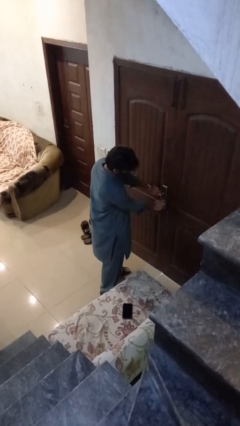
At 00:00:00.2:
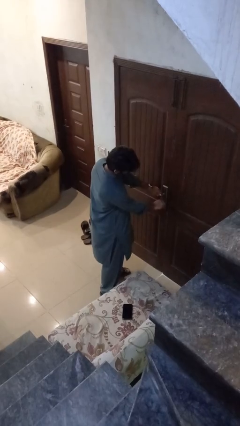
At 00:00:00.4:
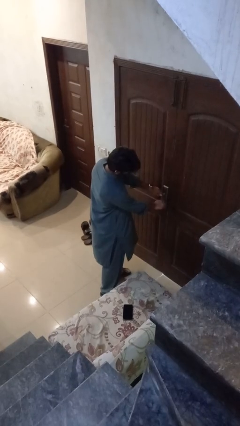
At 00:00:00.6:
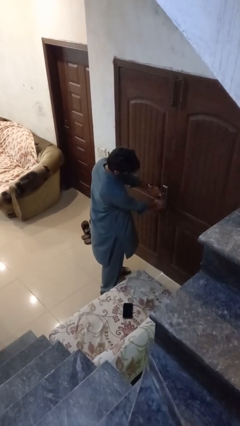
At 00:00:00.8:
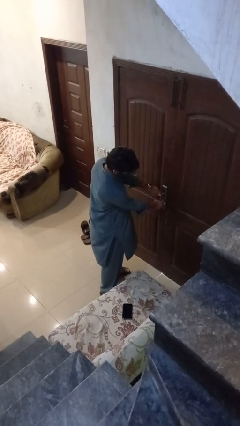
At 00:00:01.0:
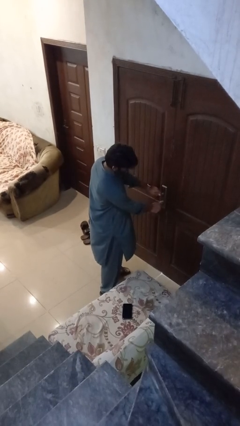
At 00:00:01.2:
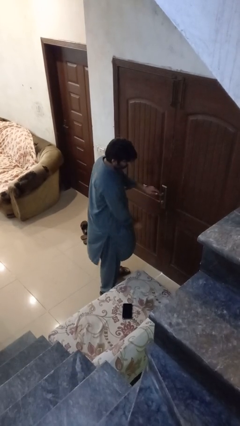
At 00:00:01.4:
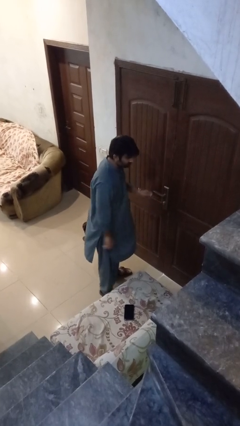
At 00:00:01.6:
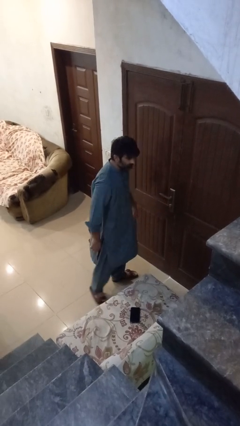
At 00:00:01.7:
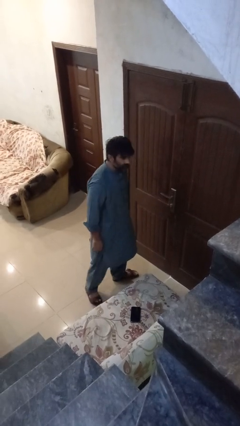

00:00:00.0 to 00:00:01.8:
person locks door with keys

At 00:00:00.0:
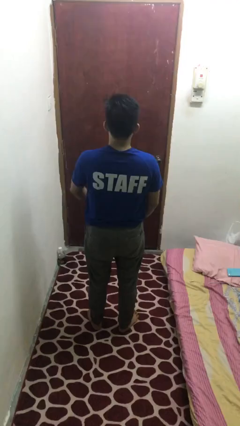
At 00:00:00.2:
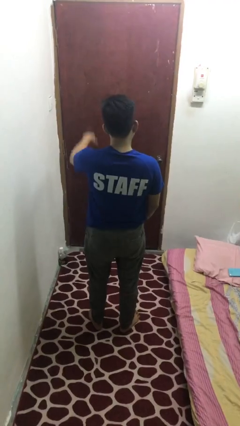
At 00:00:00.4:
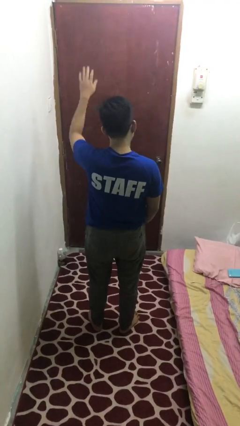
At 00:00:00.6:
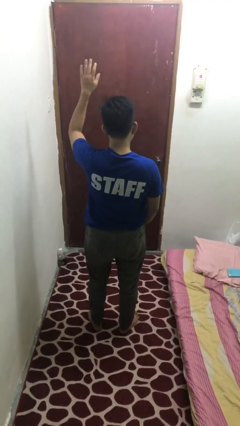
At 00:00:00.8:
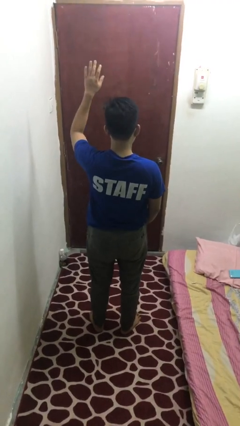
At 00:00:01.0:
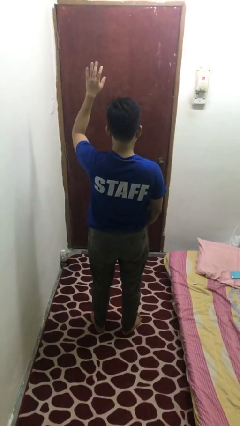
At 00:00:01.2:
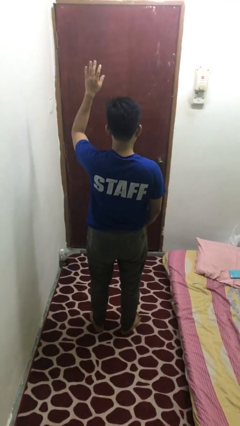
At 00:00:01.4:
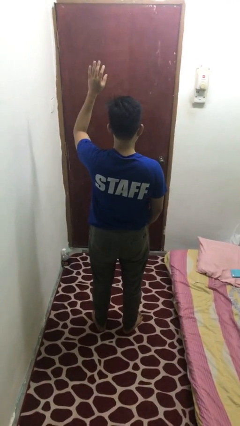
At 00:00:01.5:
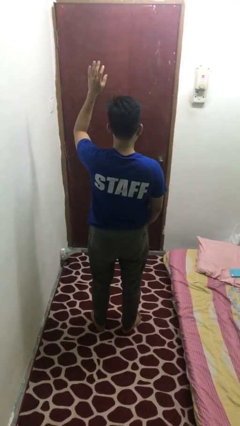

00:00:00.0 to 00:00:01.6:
person gestures swipe up

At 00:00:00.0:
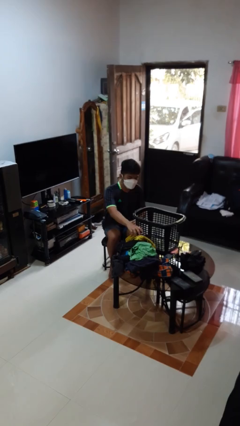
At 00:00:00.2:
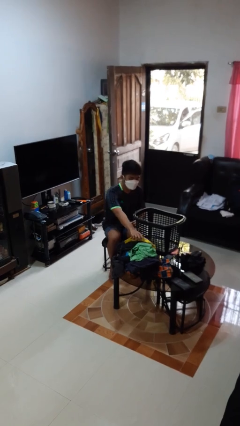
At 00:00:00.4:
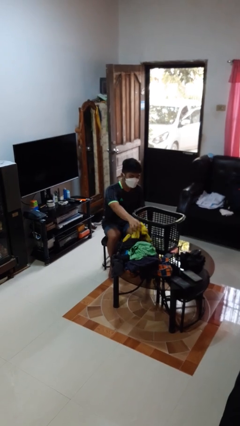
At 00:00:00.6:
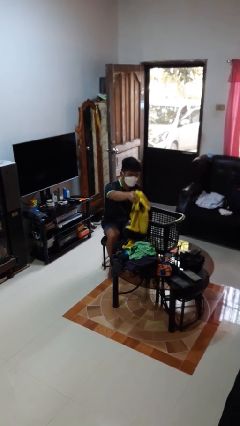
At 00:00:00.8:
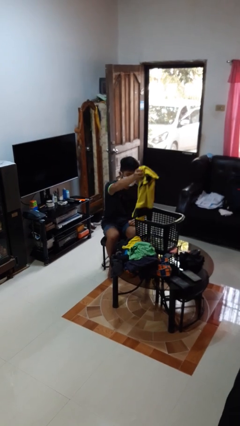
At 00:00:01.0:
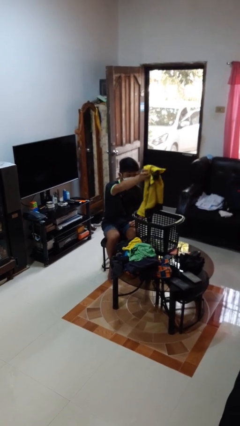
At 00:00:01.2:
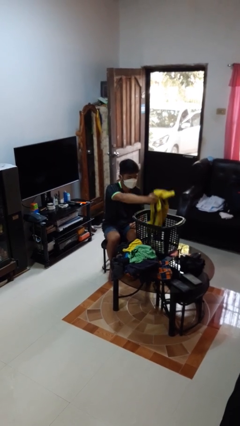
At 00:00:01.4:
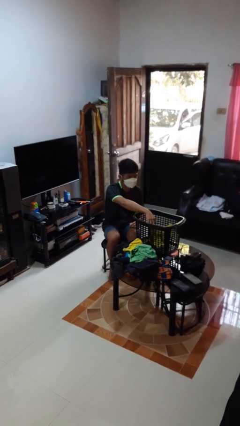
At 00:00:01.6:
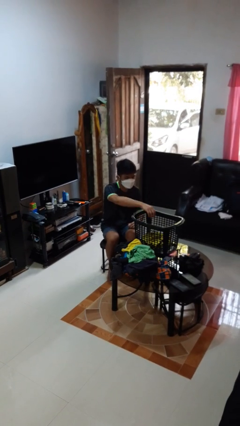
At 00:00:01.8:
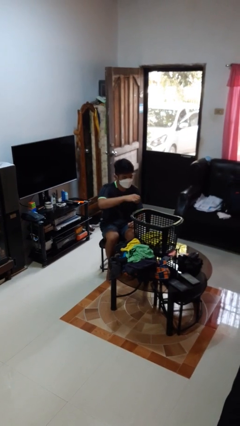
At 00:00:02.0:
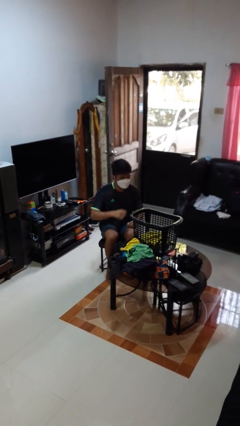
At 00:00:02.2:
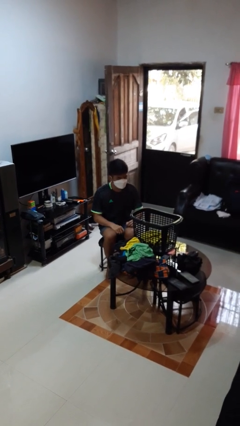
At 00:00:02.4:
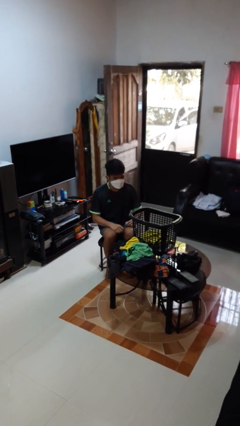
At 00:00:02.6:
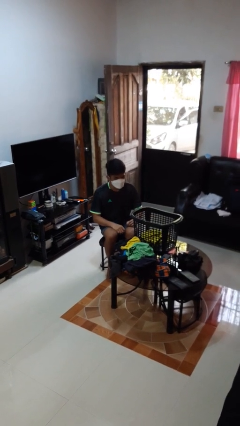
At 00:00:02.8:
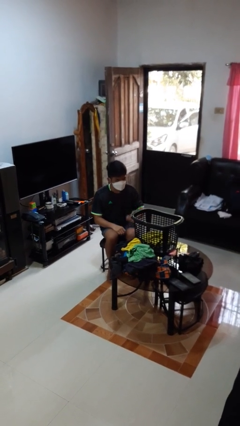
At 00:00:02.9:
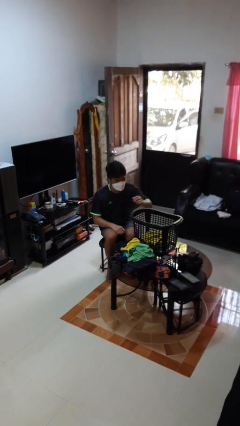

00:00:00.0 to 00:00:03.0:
person puts object into basket

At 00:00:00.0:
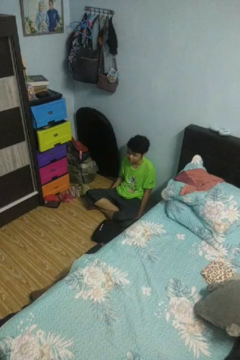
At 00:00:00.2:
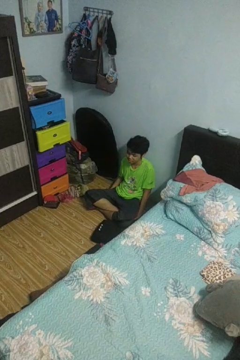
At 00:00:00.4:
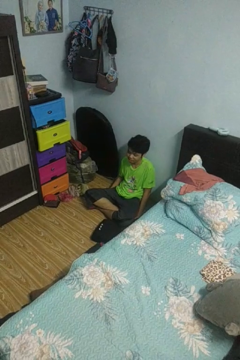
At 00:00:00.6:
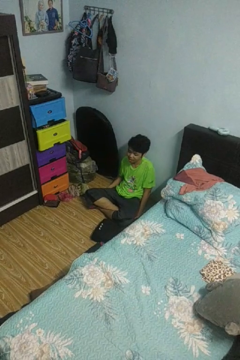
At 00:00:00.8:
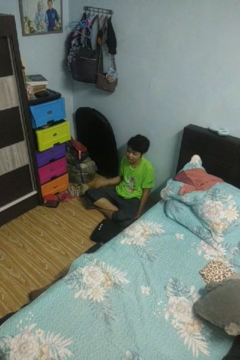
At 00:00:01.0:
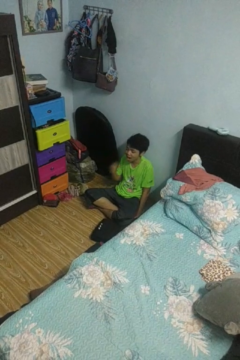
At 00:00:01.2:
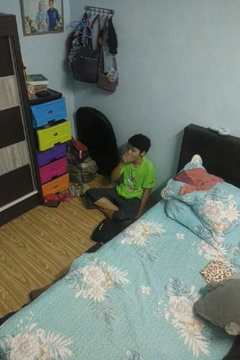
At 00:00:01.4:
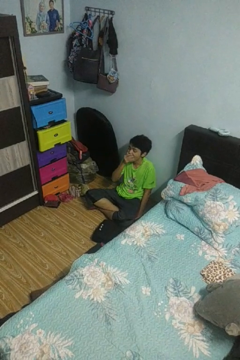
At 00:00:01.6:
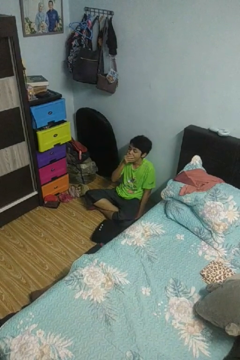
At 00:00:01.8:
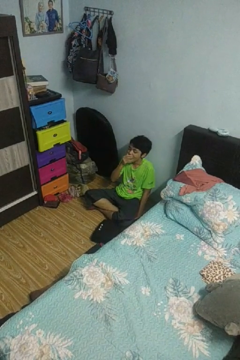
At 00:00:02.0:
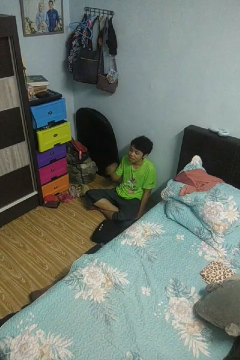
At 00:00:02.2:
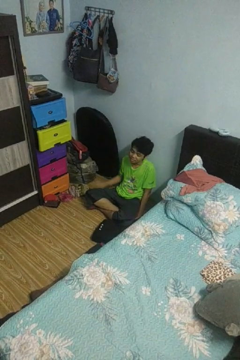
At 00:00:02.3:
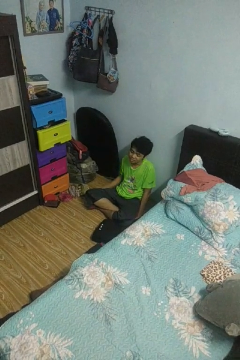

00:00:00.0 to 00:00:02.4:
person yawns

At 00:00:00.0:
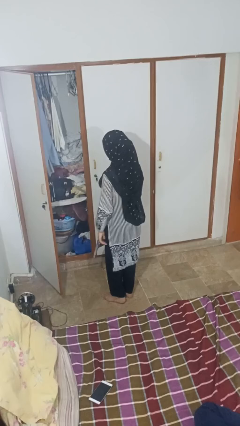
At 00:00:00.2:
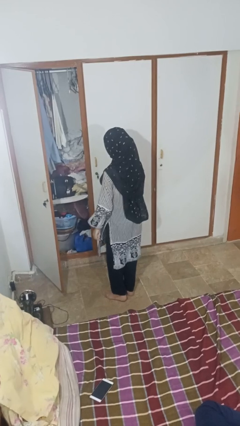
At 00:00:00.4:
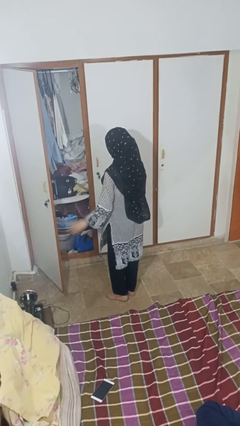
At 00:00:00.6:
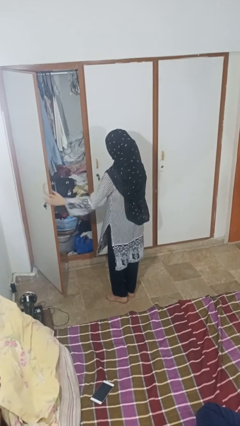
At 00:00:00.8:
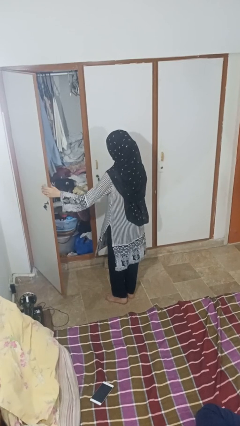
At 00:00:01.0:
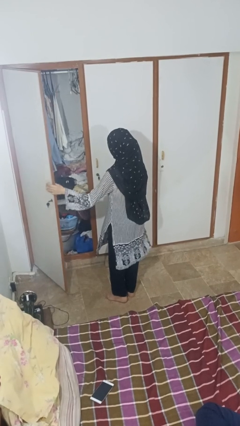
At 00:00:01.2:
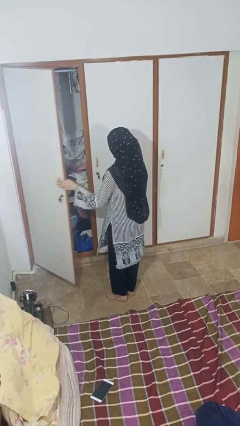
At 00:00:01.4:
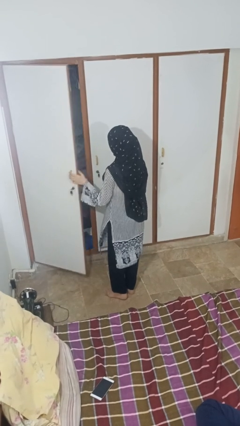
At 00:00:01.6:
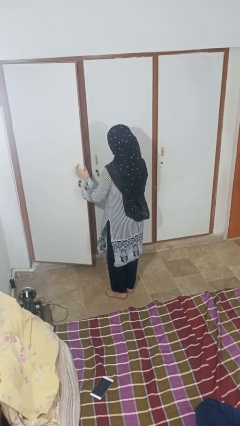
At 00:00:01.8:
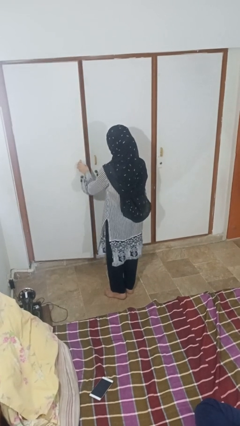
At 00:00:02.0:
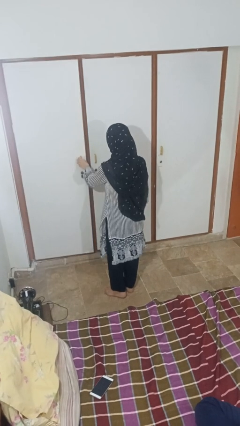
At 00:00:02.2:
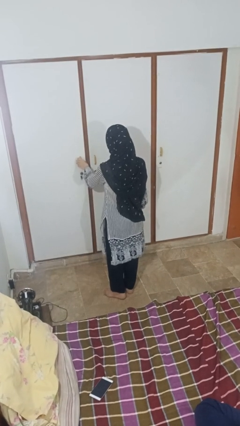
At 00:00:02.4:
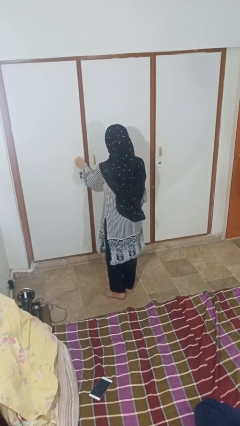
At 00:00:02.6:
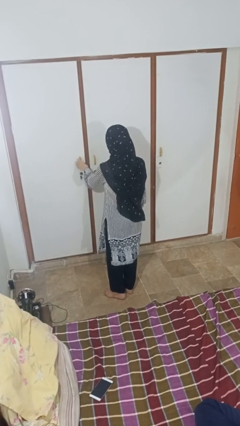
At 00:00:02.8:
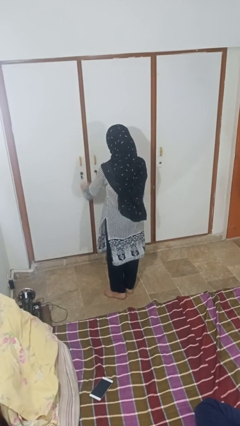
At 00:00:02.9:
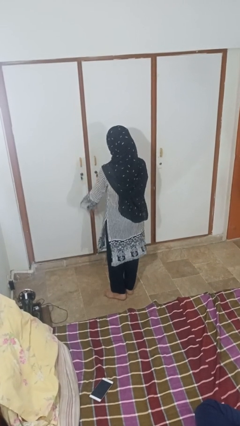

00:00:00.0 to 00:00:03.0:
person closes closet door

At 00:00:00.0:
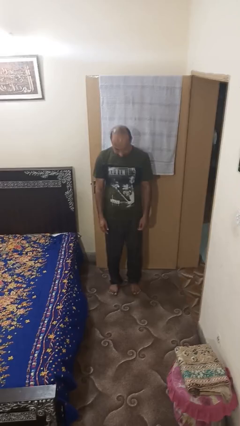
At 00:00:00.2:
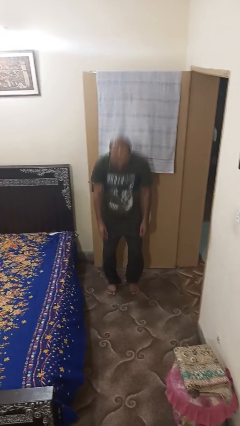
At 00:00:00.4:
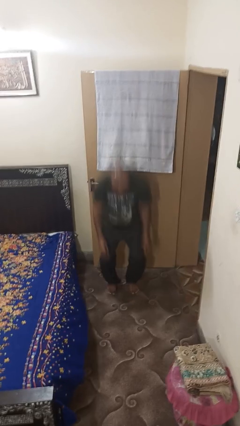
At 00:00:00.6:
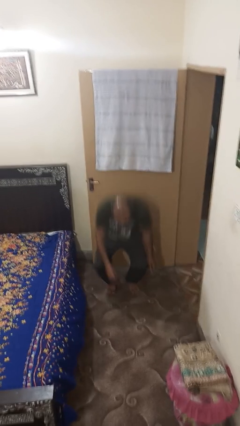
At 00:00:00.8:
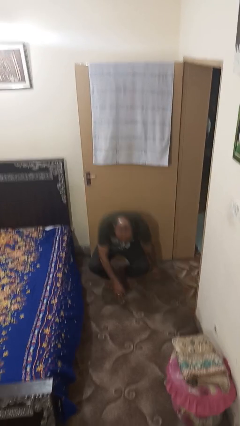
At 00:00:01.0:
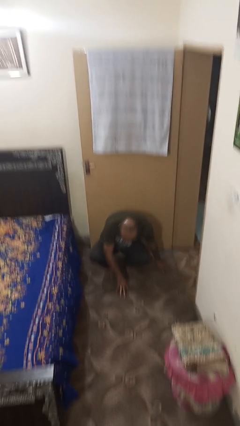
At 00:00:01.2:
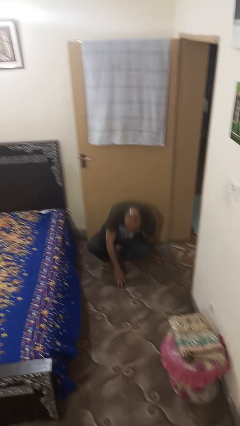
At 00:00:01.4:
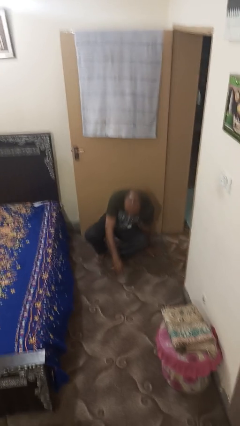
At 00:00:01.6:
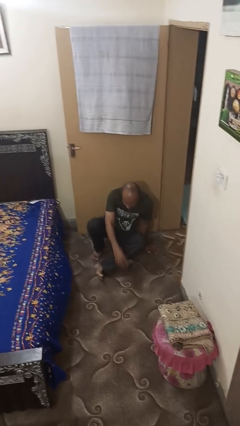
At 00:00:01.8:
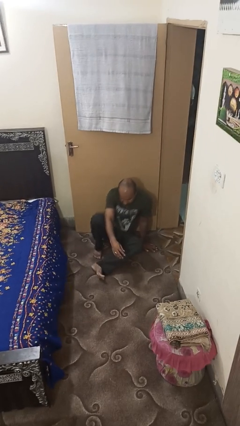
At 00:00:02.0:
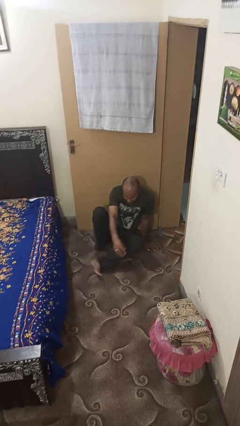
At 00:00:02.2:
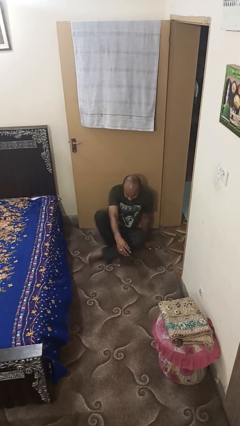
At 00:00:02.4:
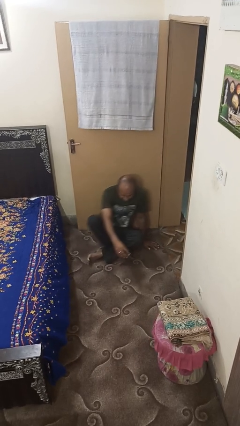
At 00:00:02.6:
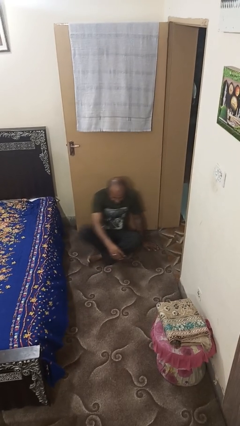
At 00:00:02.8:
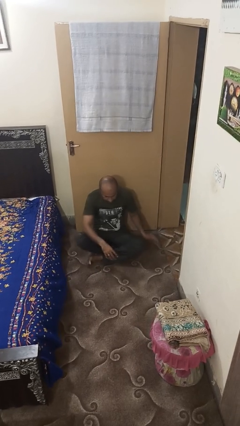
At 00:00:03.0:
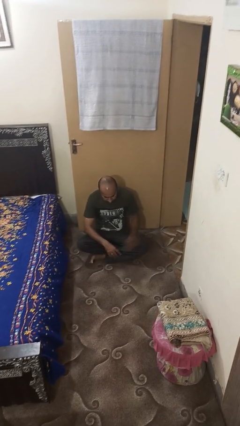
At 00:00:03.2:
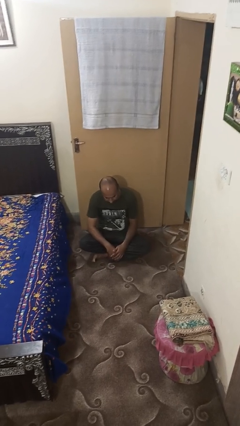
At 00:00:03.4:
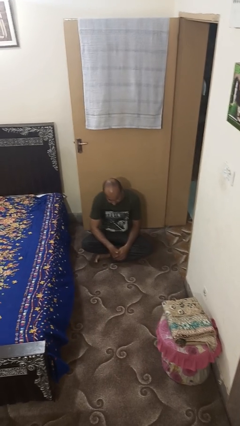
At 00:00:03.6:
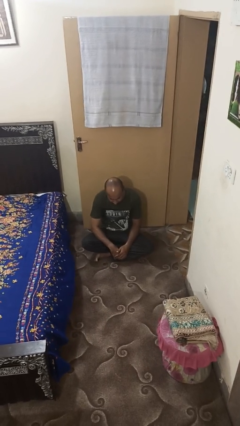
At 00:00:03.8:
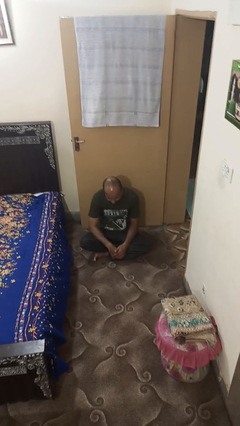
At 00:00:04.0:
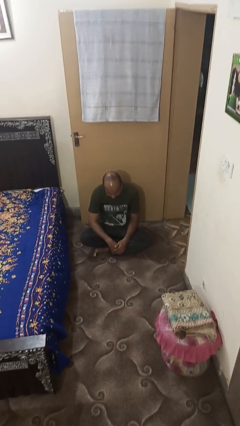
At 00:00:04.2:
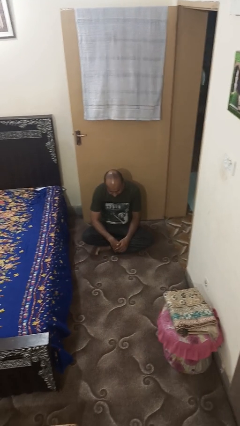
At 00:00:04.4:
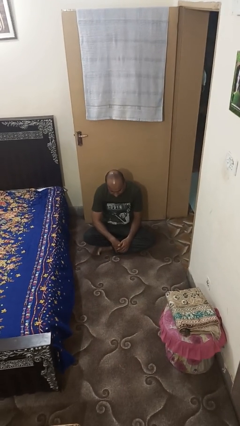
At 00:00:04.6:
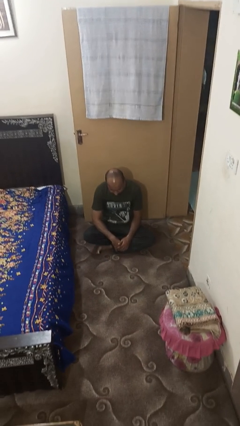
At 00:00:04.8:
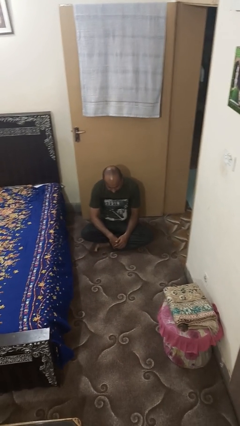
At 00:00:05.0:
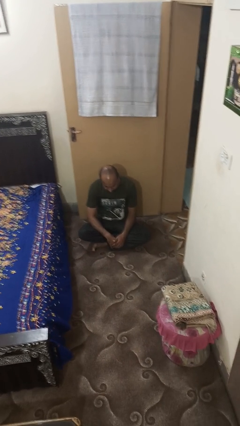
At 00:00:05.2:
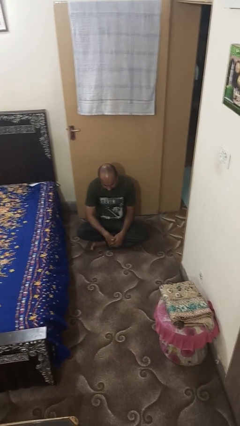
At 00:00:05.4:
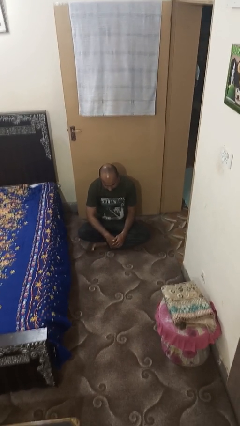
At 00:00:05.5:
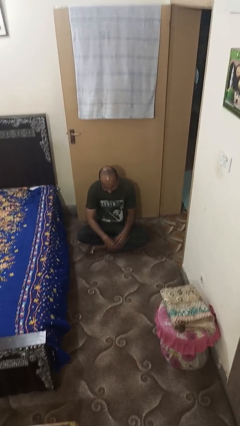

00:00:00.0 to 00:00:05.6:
person sits crisscross
